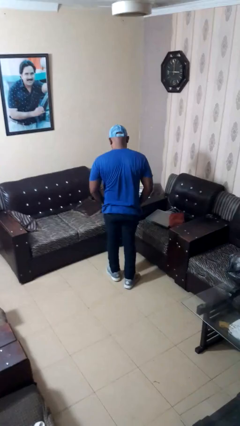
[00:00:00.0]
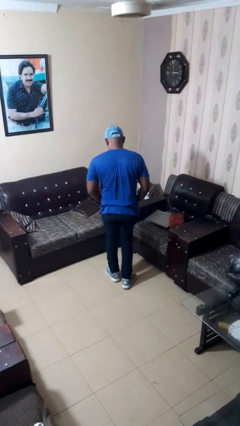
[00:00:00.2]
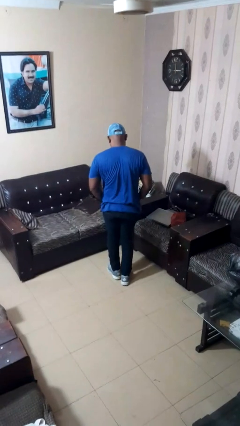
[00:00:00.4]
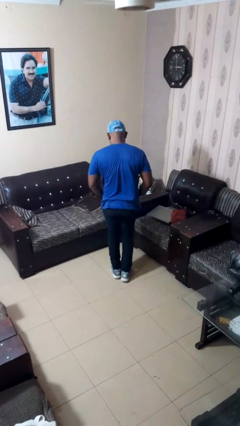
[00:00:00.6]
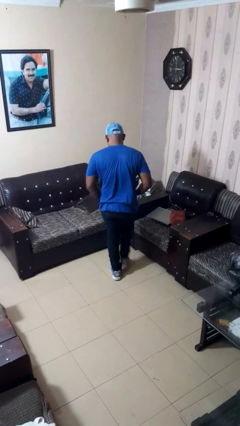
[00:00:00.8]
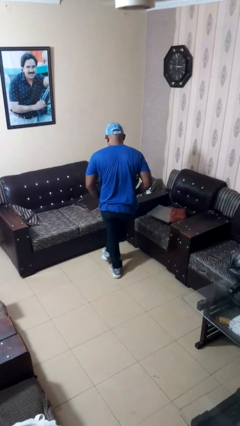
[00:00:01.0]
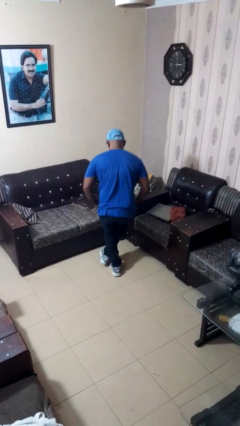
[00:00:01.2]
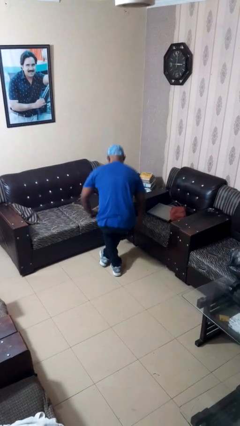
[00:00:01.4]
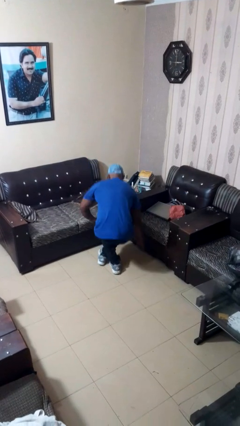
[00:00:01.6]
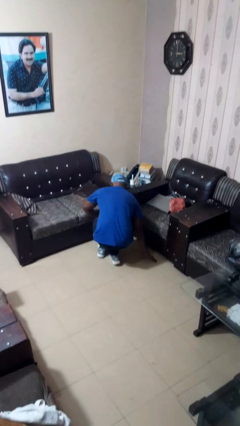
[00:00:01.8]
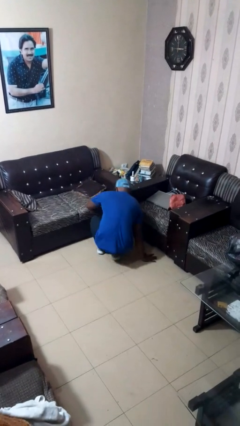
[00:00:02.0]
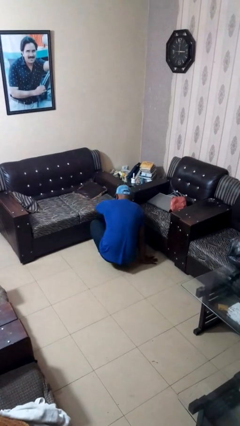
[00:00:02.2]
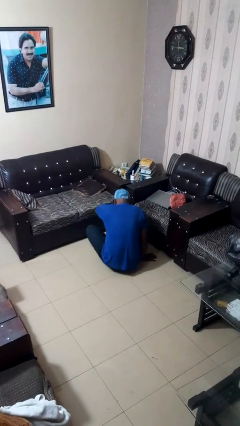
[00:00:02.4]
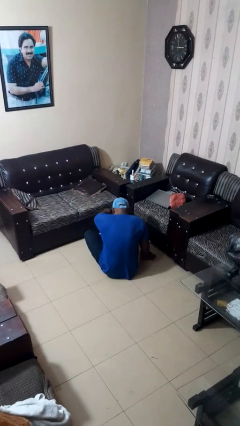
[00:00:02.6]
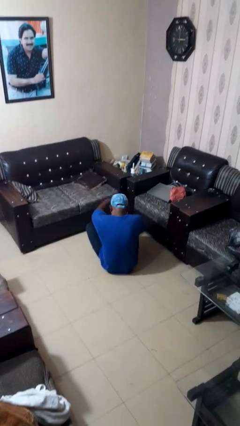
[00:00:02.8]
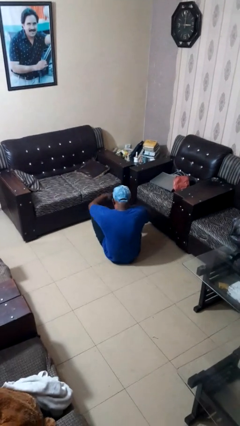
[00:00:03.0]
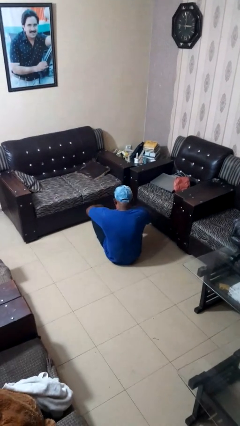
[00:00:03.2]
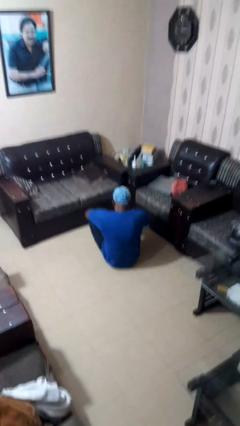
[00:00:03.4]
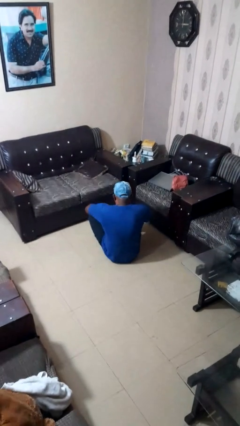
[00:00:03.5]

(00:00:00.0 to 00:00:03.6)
person sits crisscross

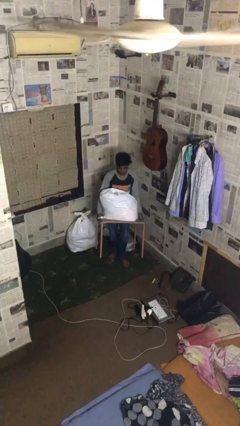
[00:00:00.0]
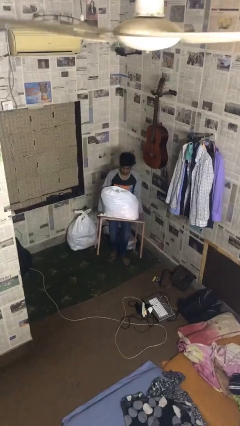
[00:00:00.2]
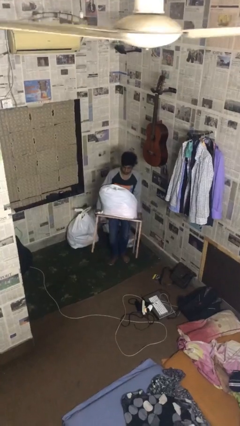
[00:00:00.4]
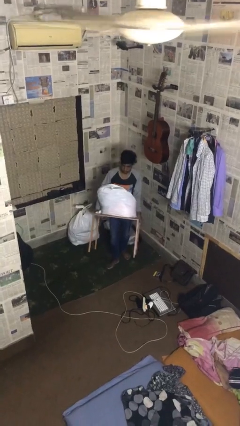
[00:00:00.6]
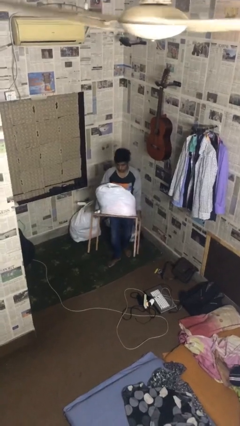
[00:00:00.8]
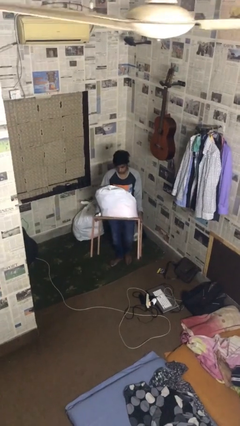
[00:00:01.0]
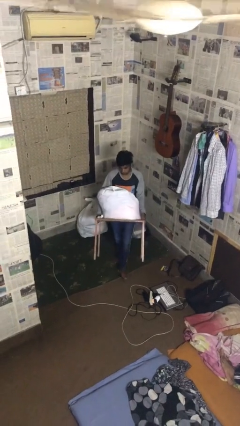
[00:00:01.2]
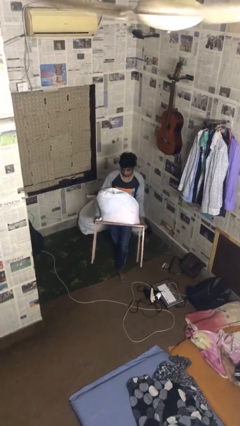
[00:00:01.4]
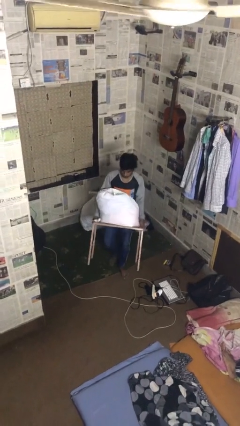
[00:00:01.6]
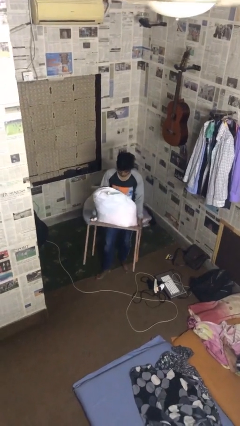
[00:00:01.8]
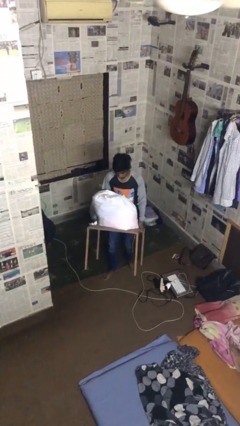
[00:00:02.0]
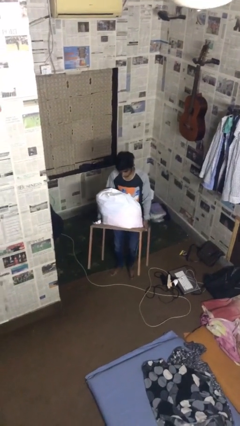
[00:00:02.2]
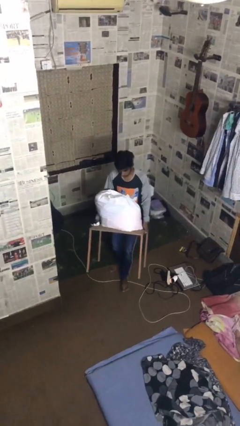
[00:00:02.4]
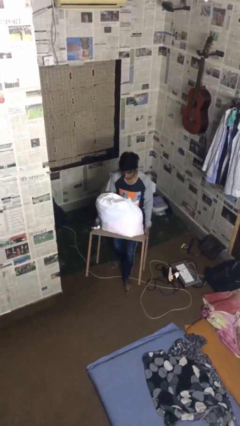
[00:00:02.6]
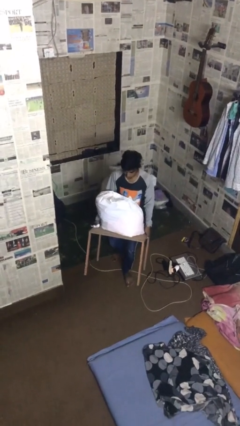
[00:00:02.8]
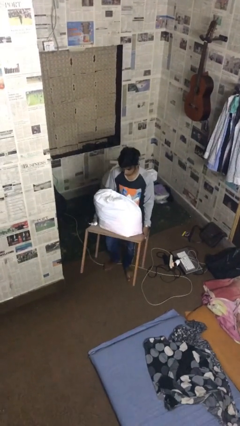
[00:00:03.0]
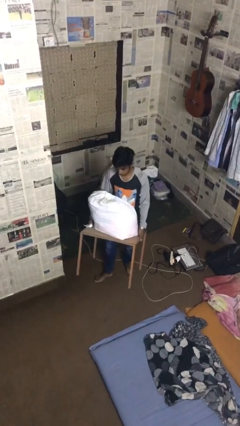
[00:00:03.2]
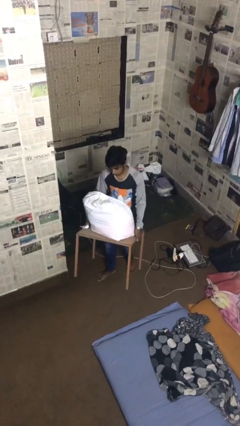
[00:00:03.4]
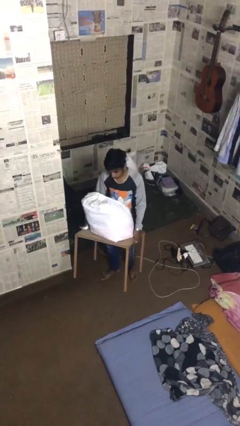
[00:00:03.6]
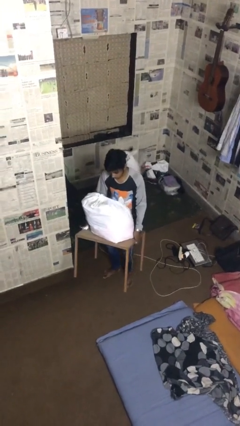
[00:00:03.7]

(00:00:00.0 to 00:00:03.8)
person carries heavy object

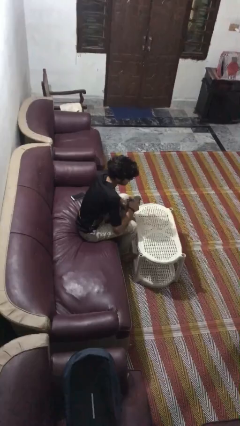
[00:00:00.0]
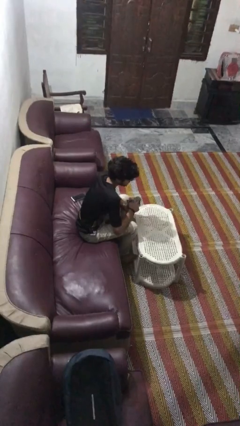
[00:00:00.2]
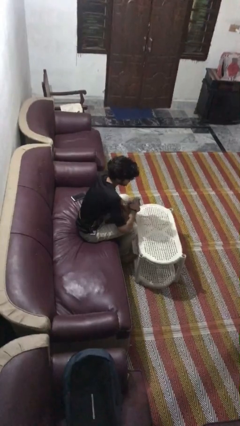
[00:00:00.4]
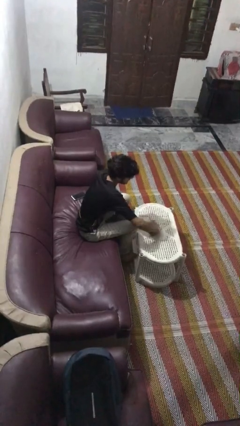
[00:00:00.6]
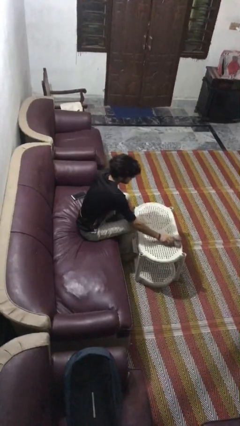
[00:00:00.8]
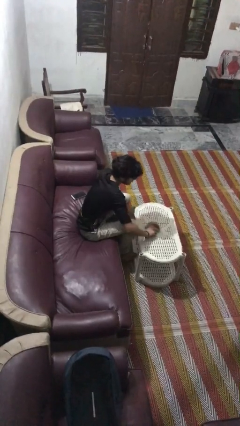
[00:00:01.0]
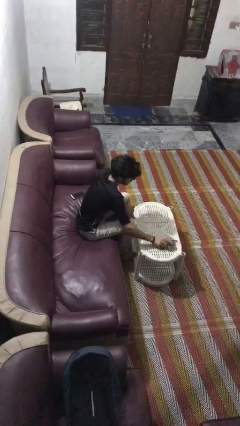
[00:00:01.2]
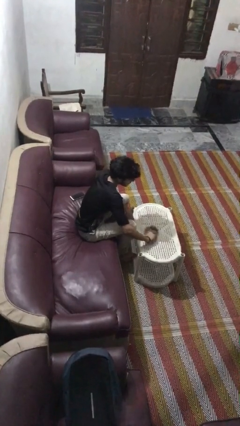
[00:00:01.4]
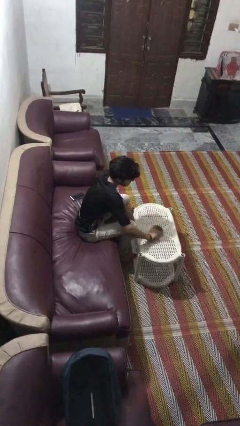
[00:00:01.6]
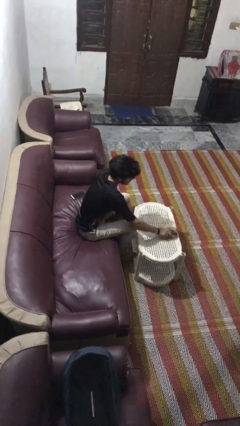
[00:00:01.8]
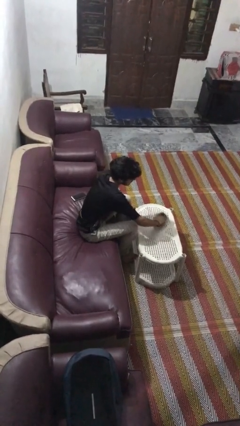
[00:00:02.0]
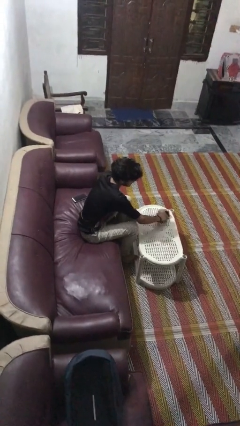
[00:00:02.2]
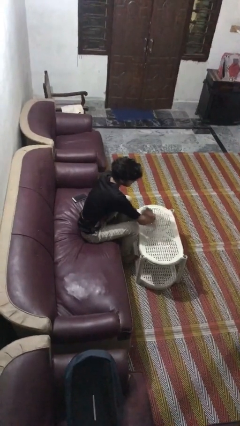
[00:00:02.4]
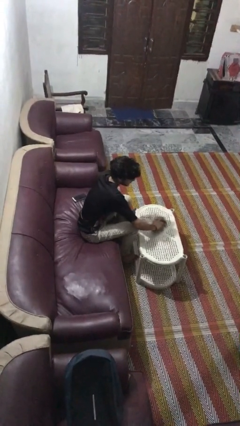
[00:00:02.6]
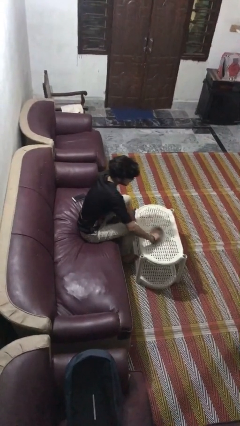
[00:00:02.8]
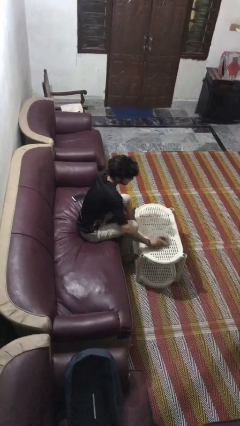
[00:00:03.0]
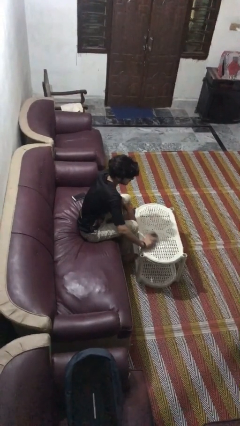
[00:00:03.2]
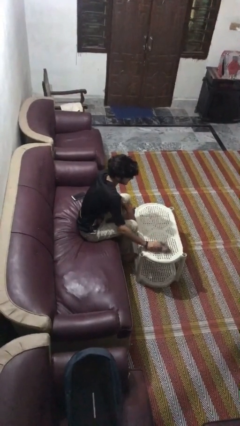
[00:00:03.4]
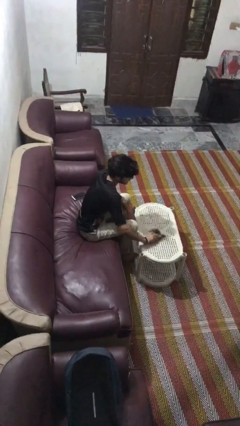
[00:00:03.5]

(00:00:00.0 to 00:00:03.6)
person cleans table with rag

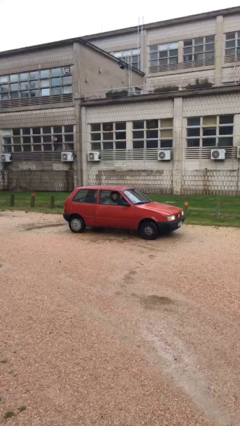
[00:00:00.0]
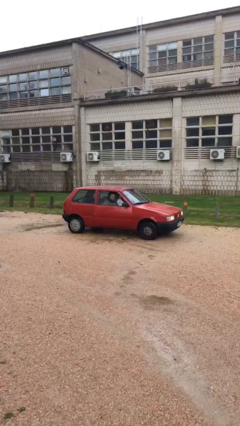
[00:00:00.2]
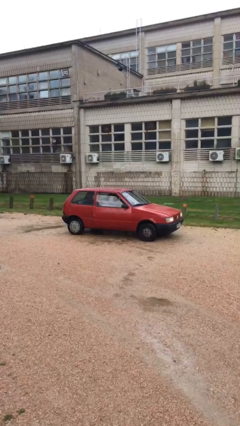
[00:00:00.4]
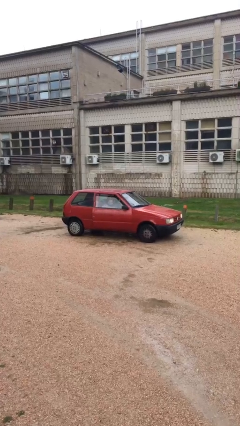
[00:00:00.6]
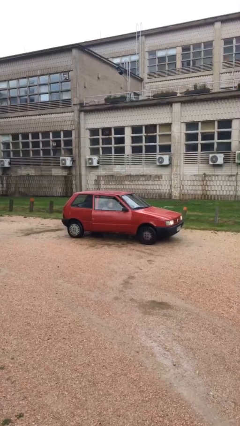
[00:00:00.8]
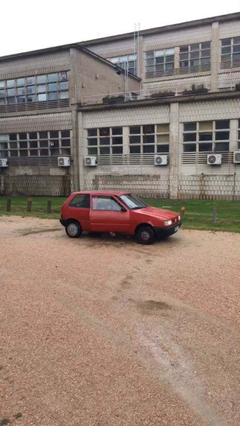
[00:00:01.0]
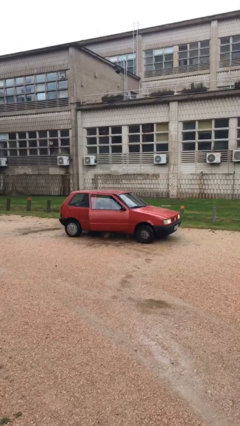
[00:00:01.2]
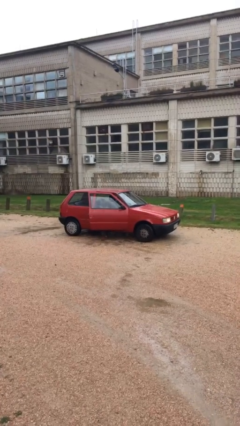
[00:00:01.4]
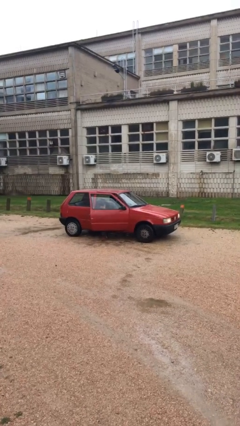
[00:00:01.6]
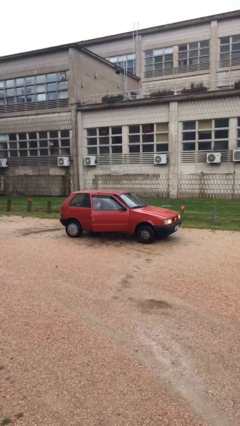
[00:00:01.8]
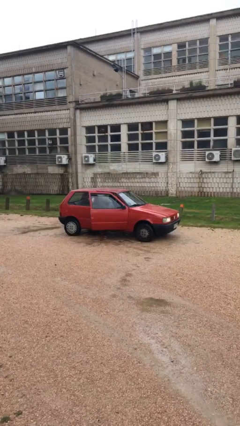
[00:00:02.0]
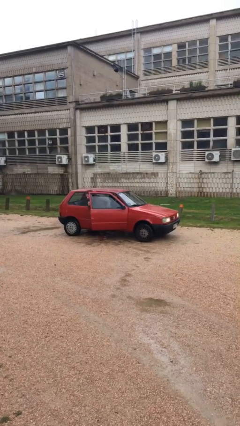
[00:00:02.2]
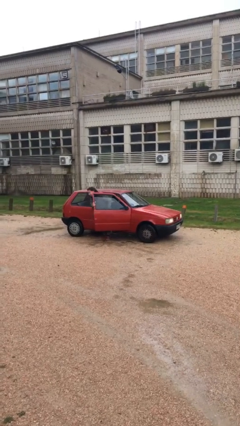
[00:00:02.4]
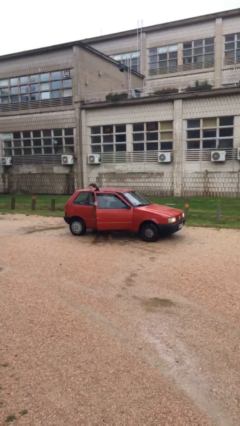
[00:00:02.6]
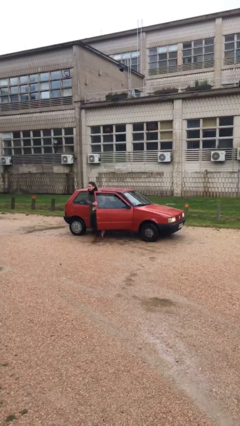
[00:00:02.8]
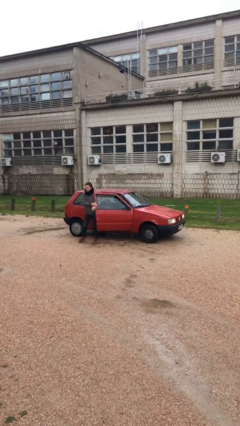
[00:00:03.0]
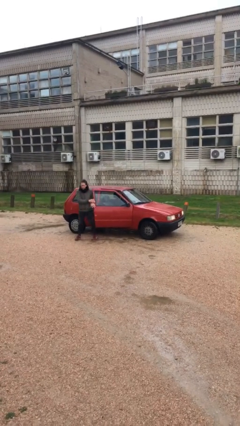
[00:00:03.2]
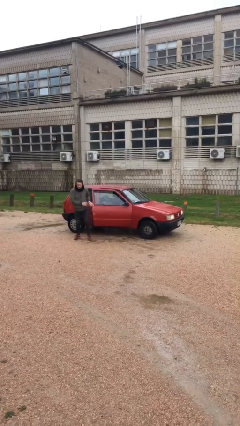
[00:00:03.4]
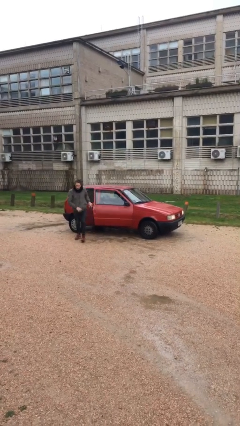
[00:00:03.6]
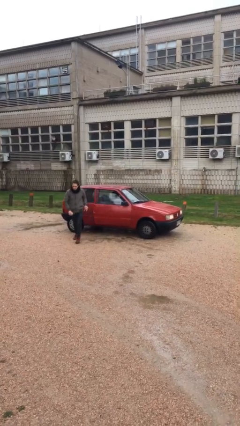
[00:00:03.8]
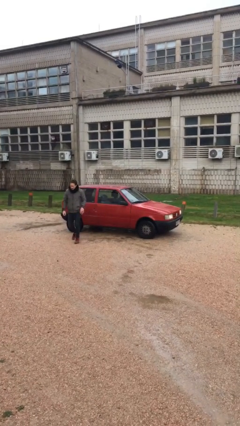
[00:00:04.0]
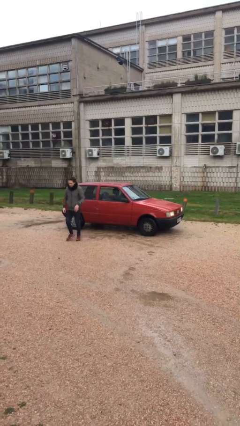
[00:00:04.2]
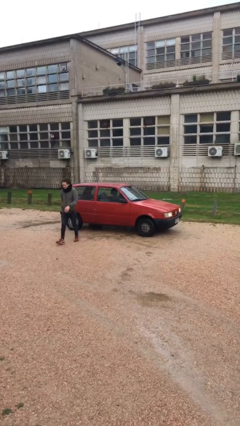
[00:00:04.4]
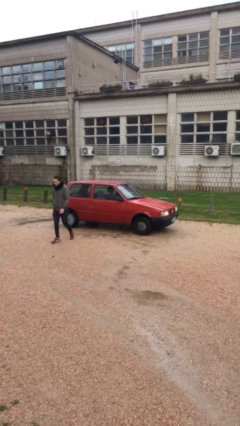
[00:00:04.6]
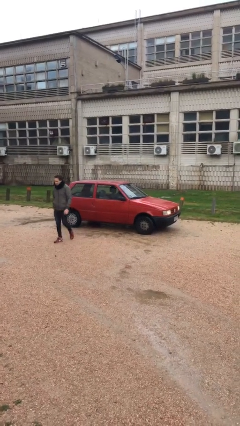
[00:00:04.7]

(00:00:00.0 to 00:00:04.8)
car drops off person

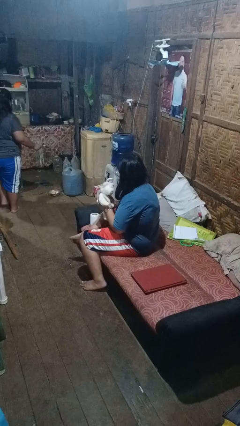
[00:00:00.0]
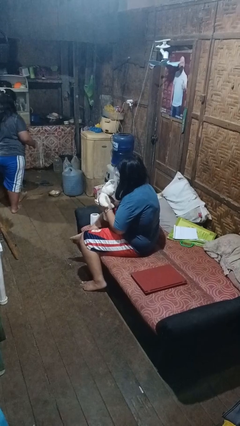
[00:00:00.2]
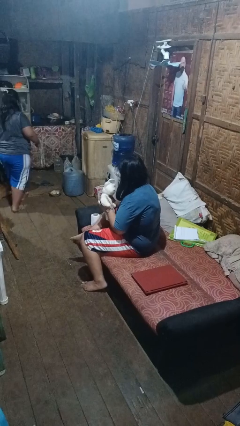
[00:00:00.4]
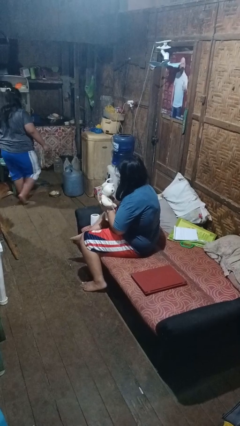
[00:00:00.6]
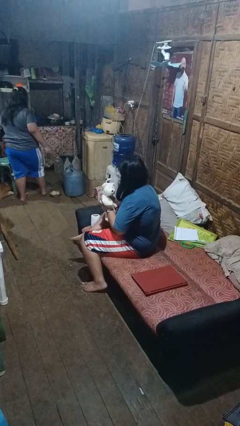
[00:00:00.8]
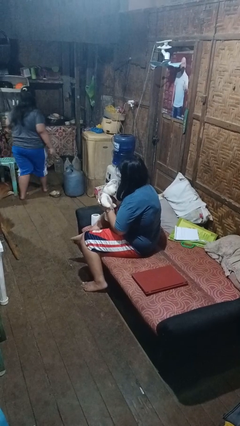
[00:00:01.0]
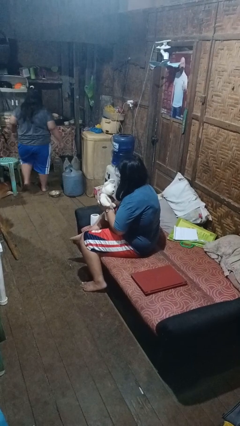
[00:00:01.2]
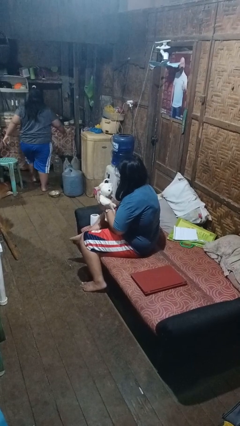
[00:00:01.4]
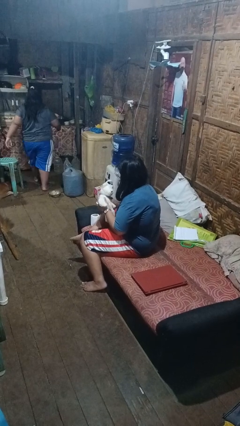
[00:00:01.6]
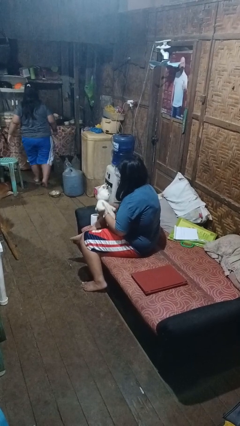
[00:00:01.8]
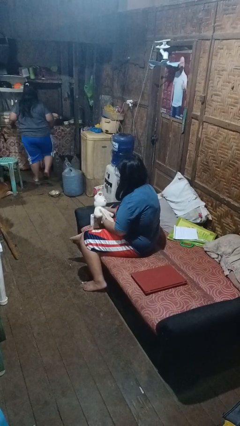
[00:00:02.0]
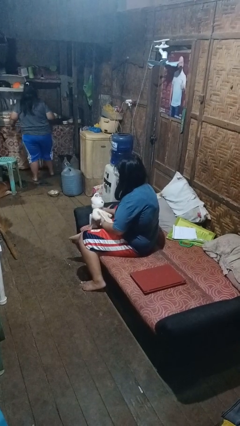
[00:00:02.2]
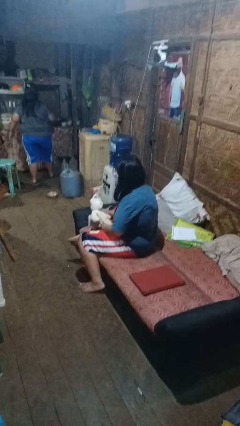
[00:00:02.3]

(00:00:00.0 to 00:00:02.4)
person squeezes object
